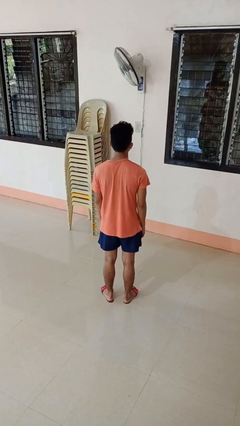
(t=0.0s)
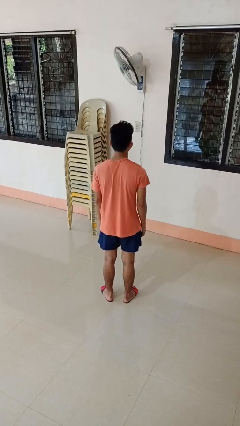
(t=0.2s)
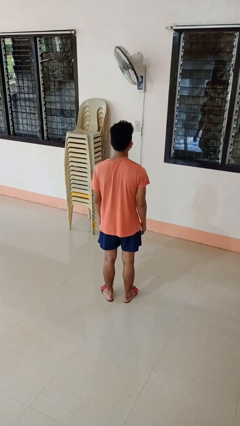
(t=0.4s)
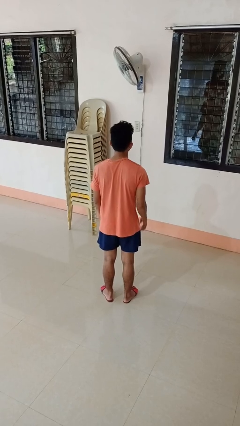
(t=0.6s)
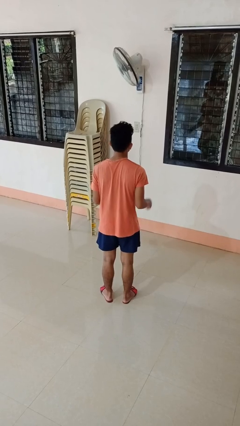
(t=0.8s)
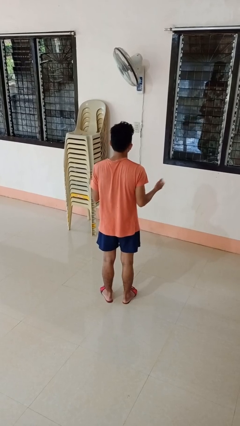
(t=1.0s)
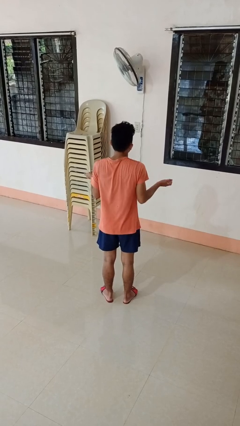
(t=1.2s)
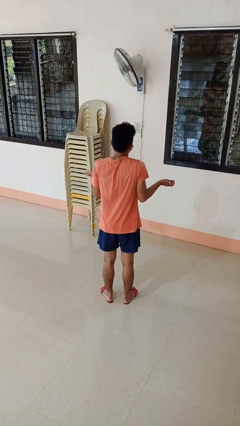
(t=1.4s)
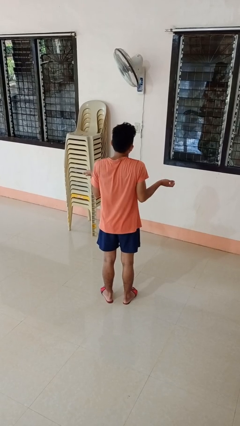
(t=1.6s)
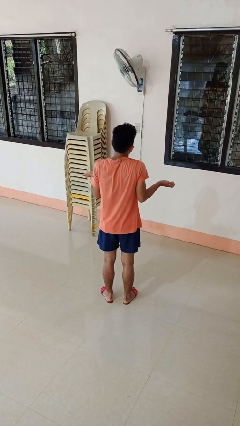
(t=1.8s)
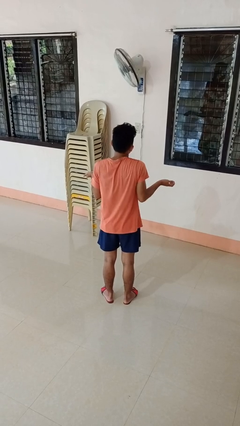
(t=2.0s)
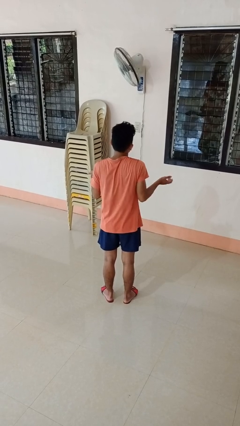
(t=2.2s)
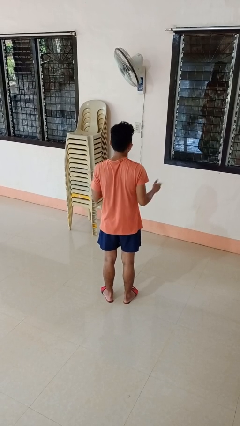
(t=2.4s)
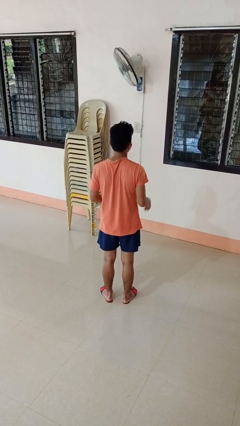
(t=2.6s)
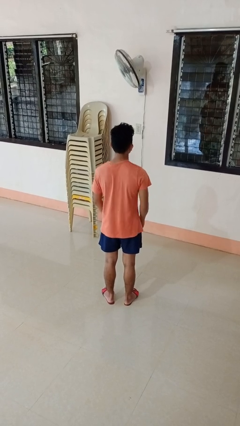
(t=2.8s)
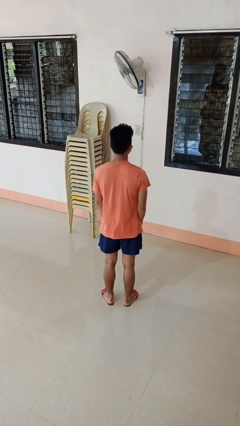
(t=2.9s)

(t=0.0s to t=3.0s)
person shrugs

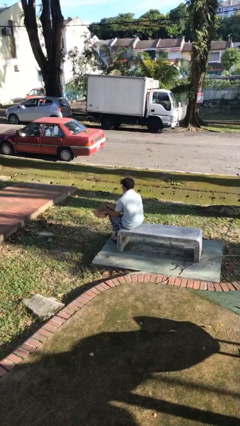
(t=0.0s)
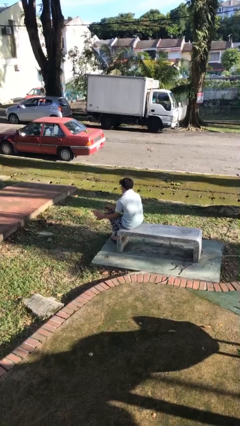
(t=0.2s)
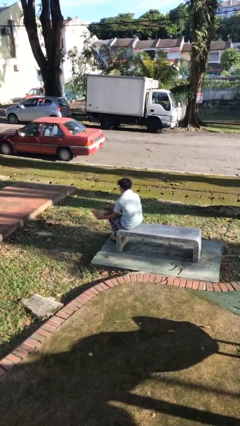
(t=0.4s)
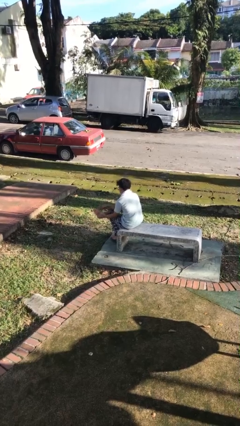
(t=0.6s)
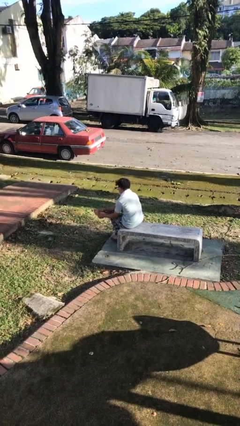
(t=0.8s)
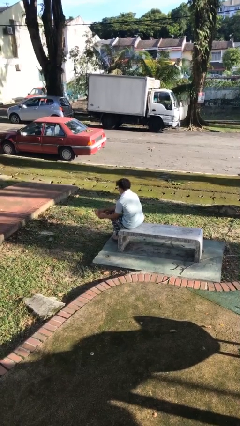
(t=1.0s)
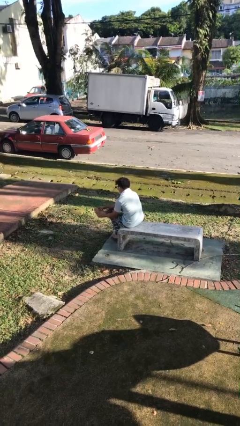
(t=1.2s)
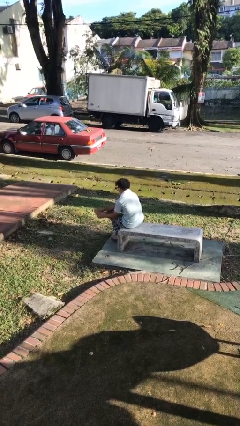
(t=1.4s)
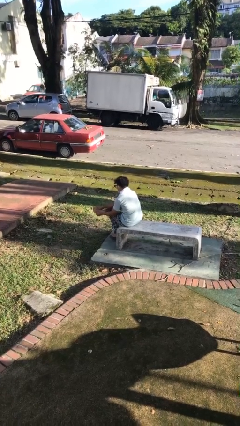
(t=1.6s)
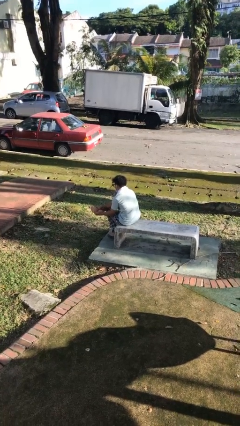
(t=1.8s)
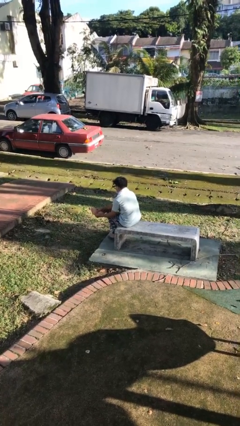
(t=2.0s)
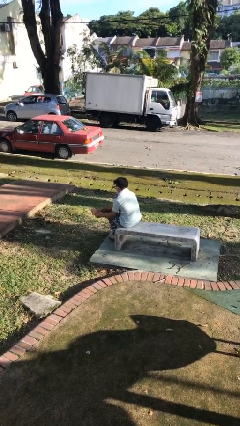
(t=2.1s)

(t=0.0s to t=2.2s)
person rubs foot

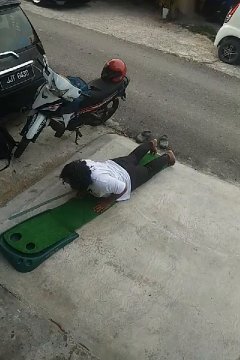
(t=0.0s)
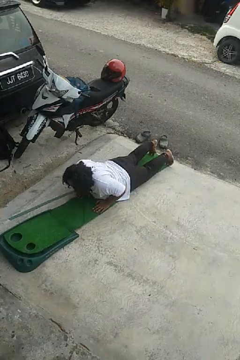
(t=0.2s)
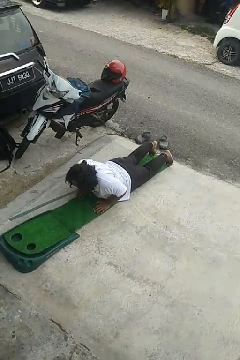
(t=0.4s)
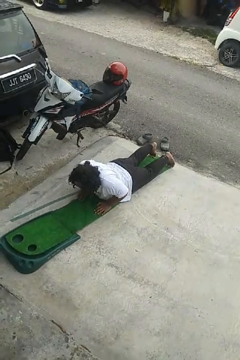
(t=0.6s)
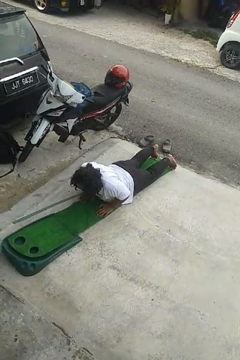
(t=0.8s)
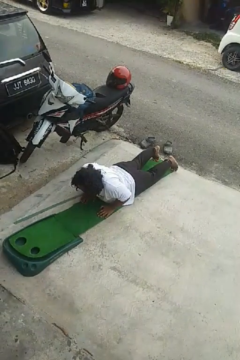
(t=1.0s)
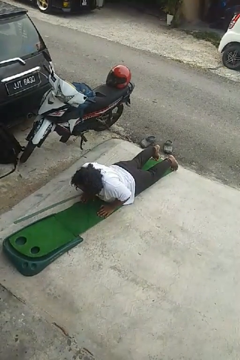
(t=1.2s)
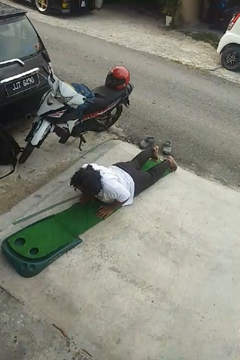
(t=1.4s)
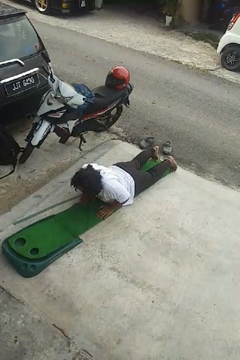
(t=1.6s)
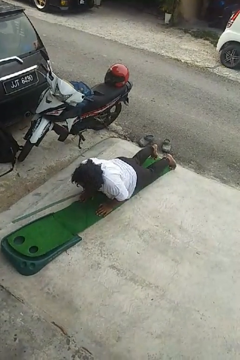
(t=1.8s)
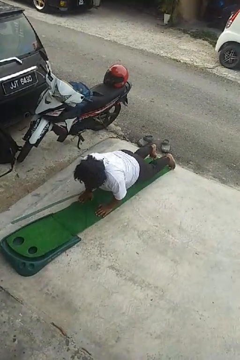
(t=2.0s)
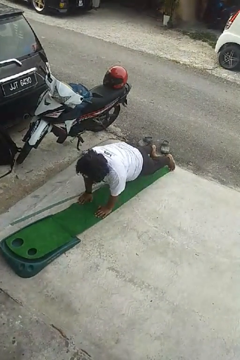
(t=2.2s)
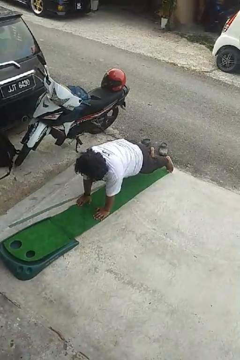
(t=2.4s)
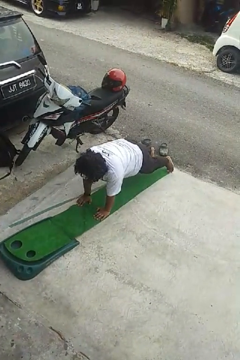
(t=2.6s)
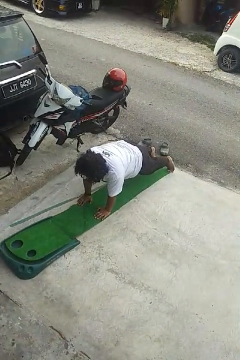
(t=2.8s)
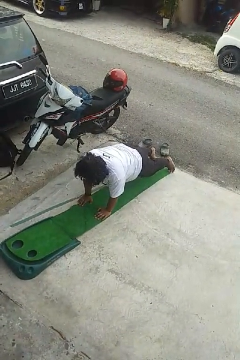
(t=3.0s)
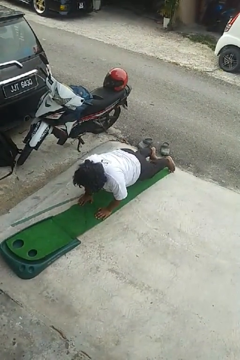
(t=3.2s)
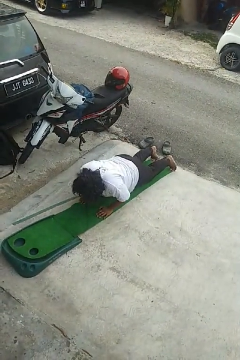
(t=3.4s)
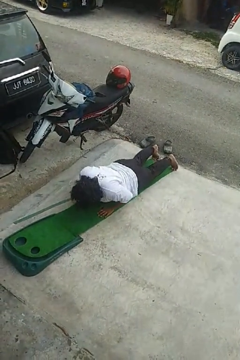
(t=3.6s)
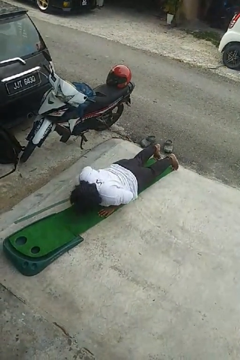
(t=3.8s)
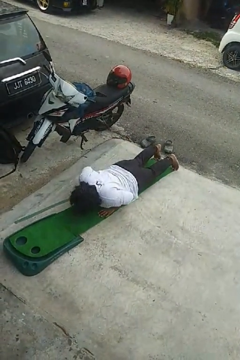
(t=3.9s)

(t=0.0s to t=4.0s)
person exercises with pushup

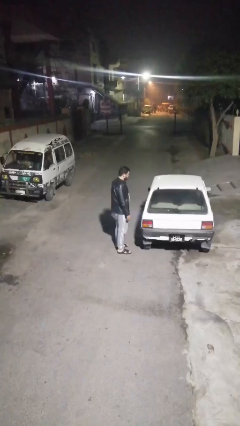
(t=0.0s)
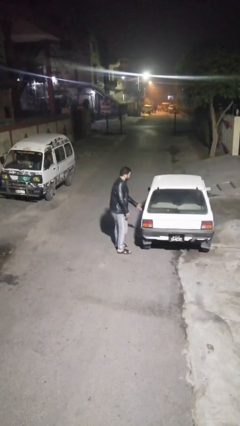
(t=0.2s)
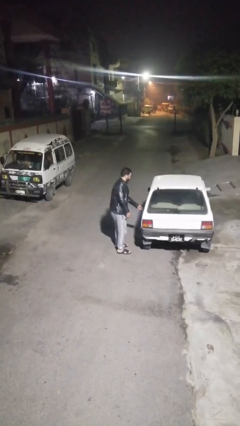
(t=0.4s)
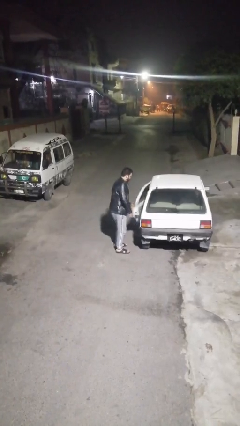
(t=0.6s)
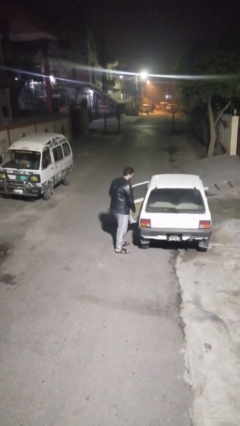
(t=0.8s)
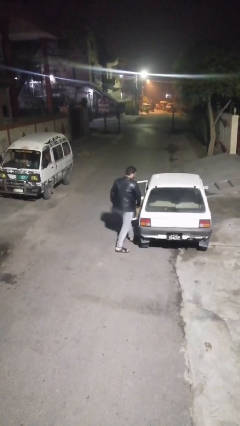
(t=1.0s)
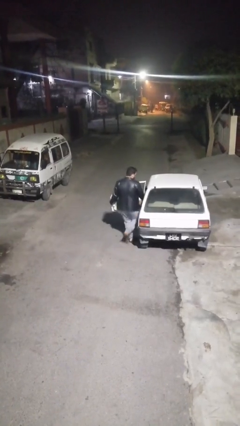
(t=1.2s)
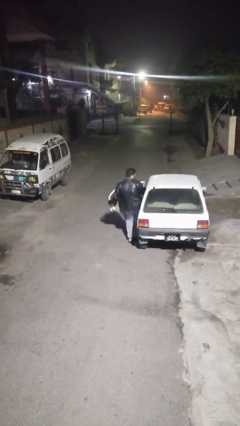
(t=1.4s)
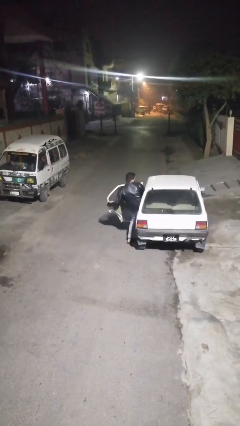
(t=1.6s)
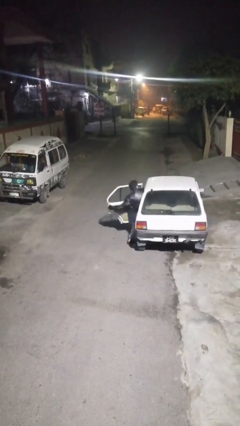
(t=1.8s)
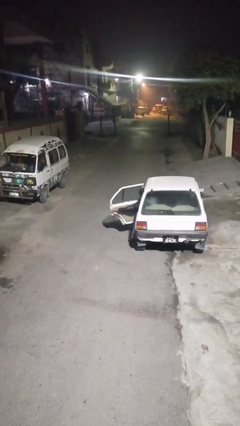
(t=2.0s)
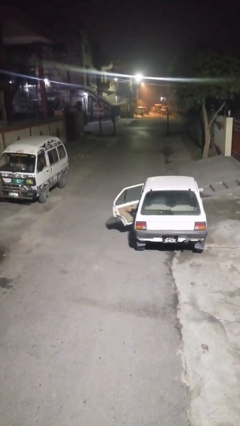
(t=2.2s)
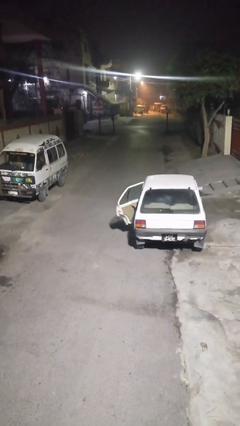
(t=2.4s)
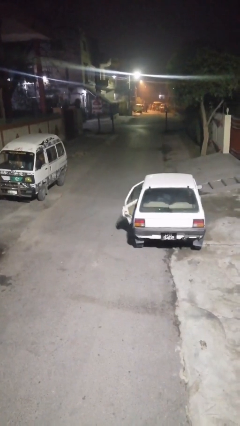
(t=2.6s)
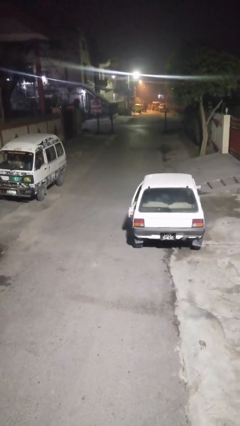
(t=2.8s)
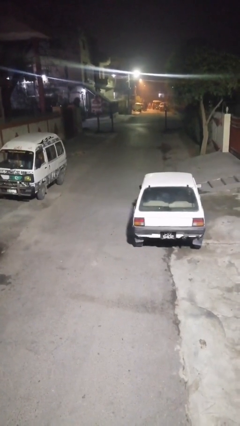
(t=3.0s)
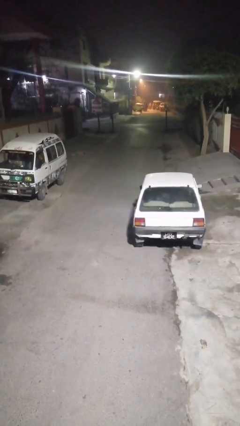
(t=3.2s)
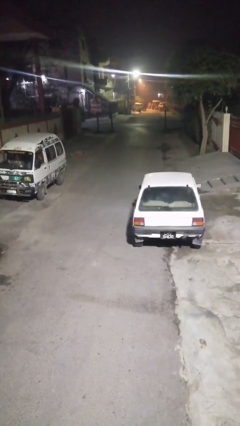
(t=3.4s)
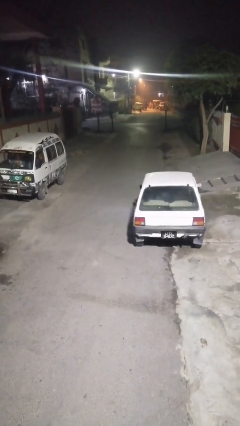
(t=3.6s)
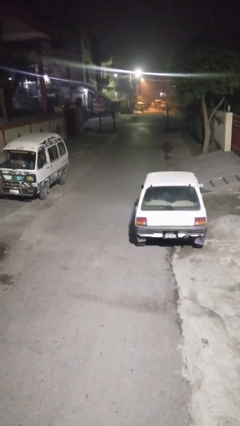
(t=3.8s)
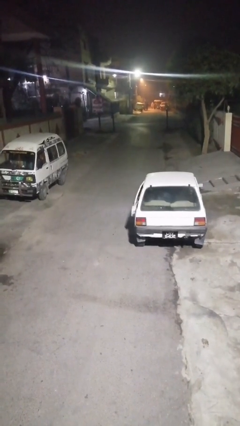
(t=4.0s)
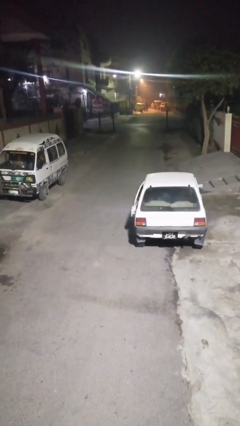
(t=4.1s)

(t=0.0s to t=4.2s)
car picks up person

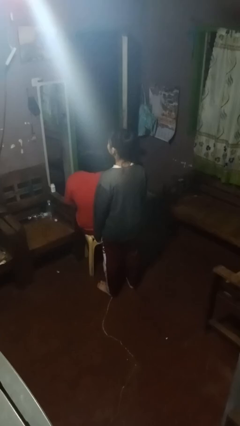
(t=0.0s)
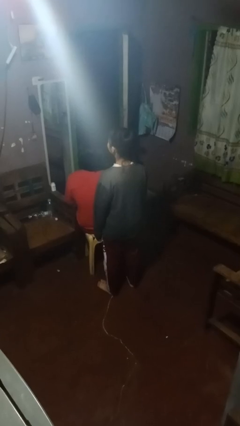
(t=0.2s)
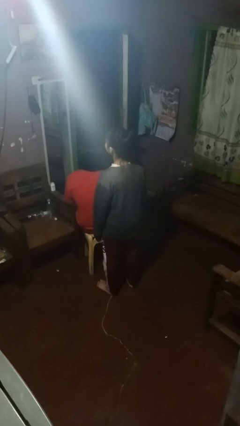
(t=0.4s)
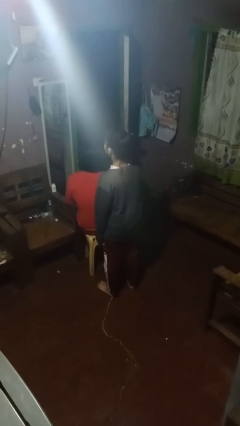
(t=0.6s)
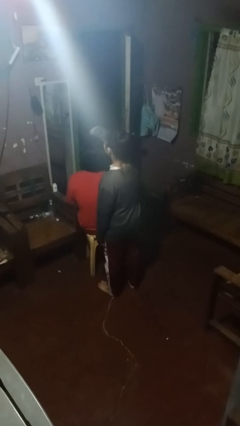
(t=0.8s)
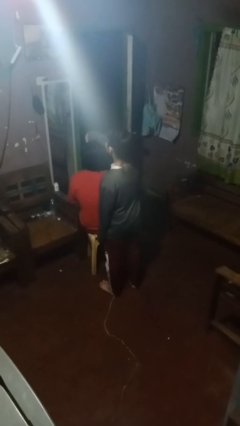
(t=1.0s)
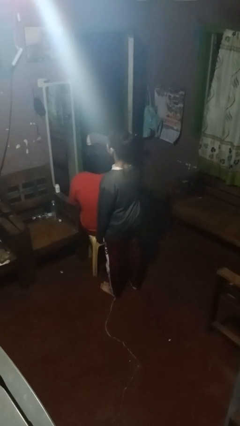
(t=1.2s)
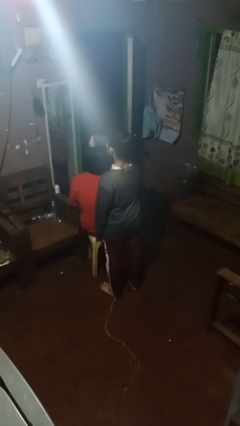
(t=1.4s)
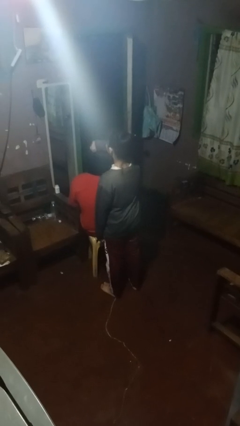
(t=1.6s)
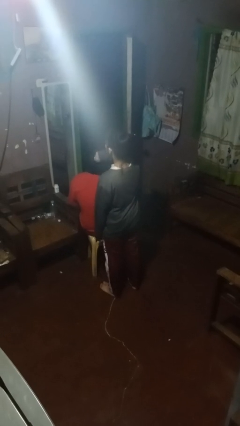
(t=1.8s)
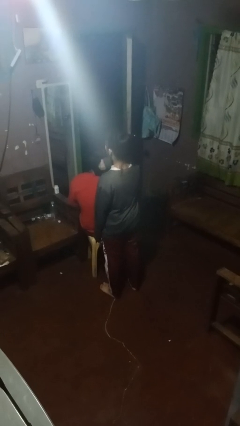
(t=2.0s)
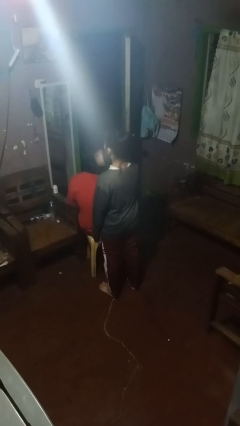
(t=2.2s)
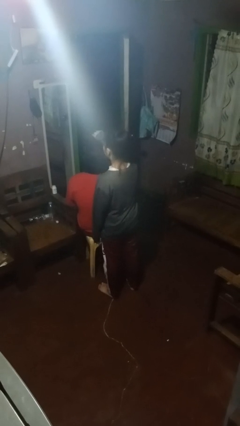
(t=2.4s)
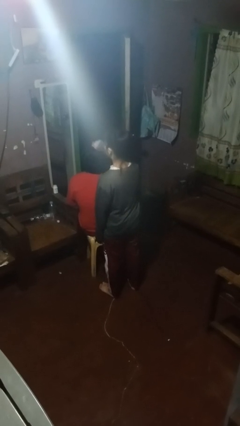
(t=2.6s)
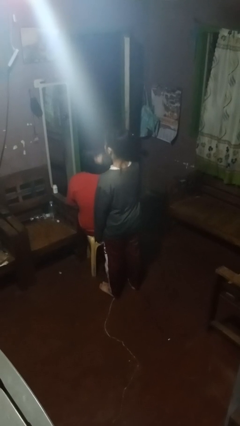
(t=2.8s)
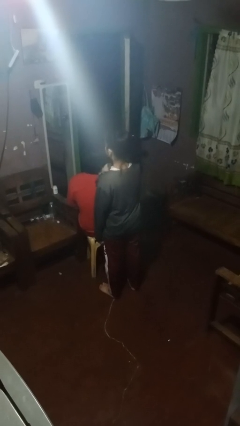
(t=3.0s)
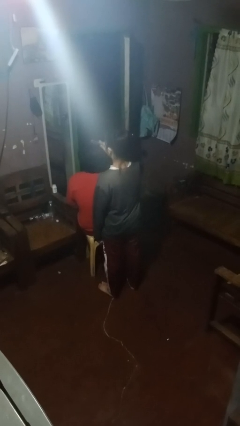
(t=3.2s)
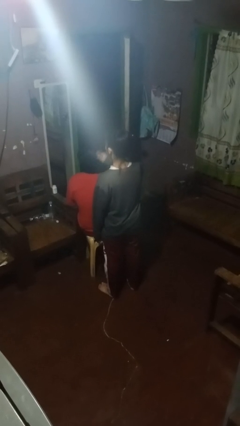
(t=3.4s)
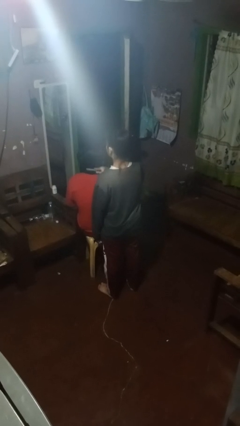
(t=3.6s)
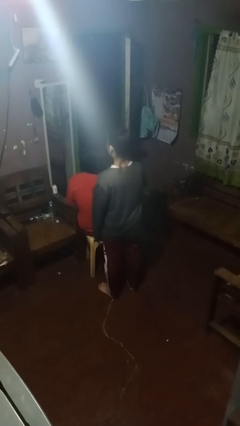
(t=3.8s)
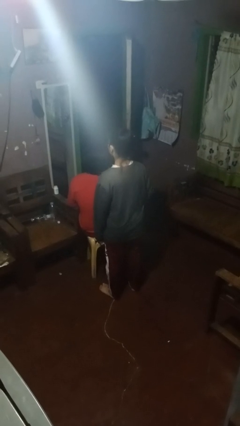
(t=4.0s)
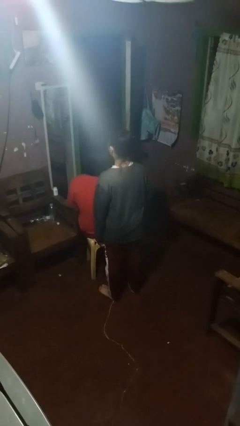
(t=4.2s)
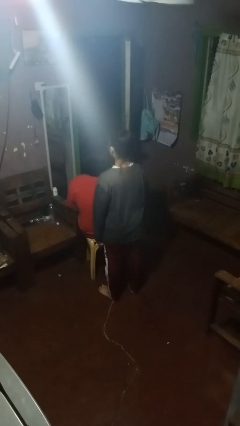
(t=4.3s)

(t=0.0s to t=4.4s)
person brushes hair of person

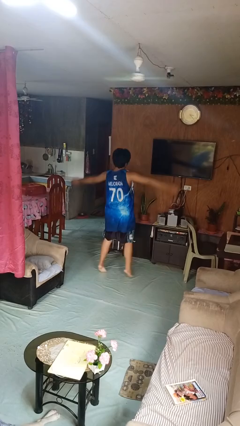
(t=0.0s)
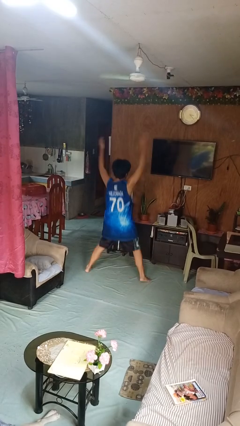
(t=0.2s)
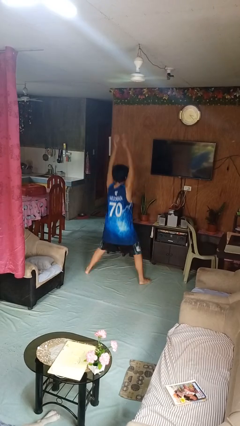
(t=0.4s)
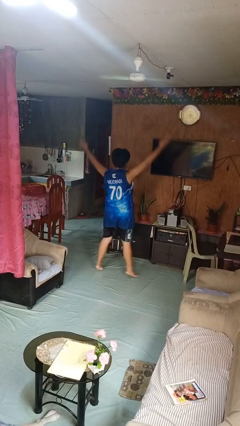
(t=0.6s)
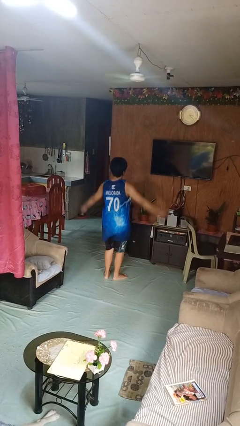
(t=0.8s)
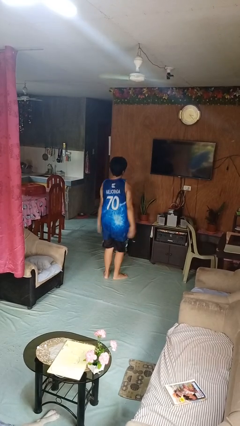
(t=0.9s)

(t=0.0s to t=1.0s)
person exercises with jumping jacks
